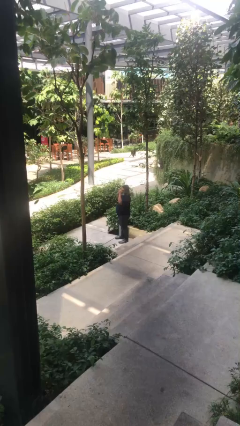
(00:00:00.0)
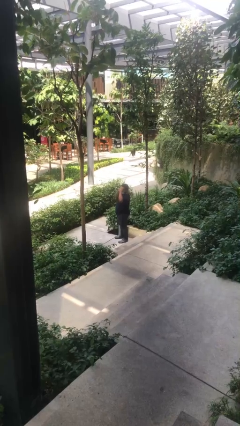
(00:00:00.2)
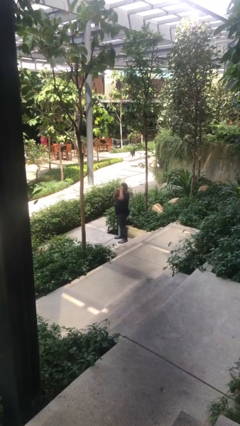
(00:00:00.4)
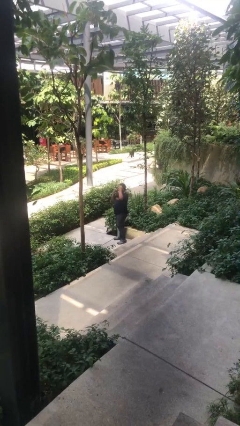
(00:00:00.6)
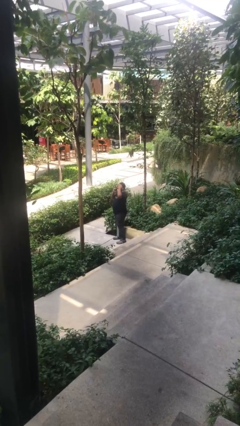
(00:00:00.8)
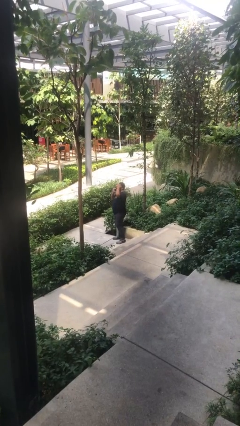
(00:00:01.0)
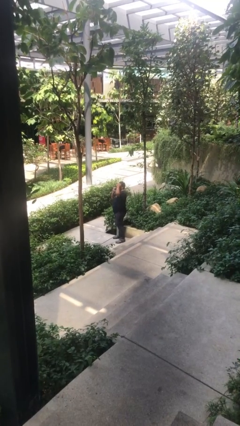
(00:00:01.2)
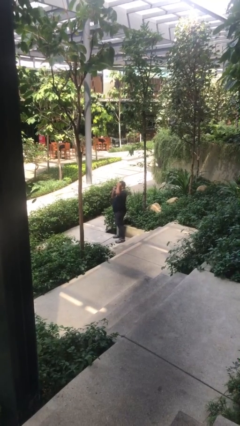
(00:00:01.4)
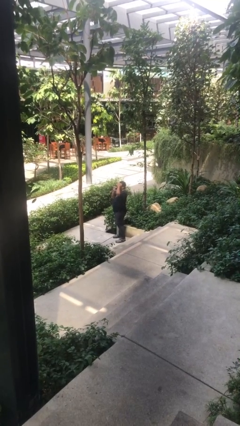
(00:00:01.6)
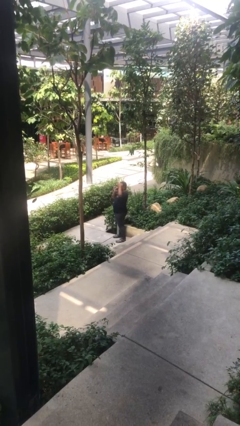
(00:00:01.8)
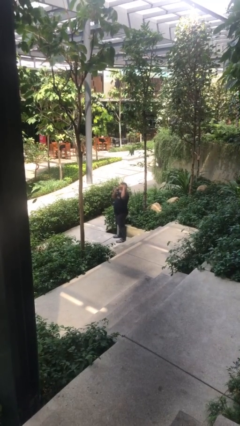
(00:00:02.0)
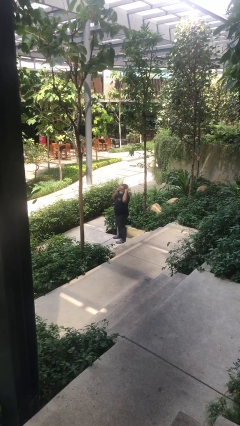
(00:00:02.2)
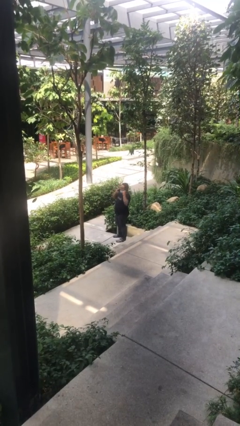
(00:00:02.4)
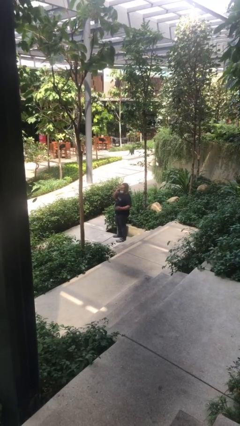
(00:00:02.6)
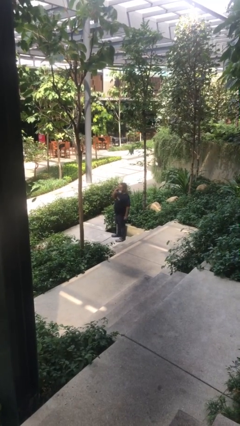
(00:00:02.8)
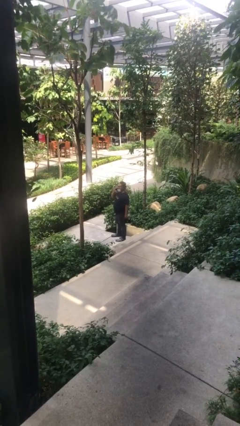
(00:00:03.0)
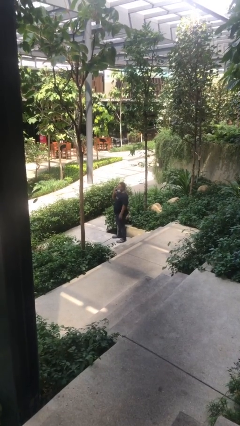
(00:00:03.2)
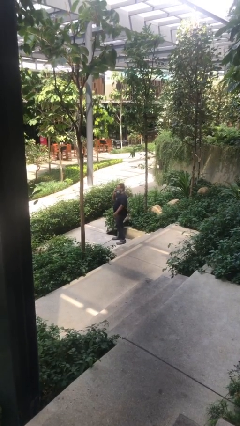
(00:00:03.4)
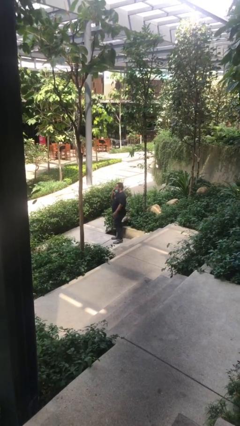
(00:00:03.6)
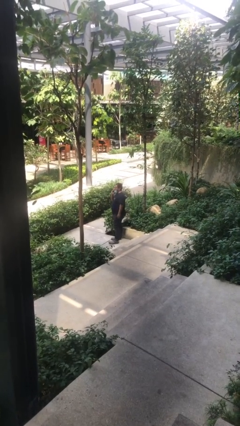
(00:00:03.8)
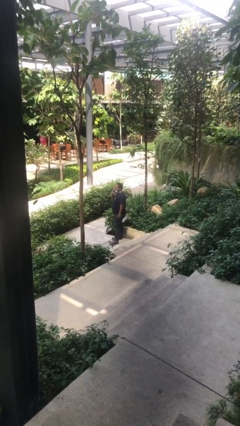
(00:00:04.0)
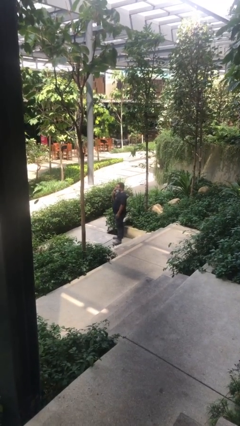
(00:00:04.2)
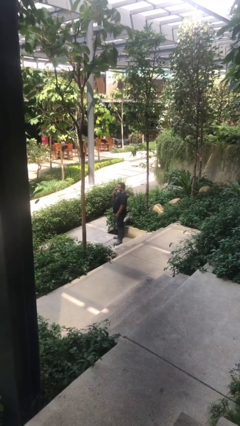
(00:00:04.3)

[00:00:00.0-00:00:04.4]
person talks on phone

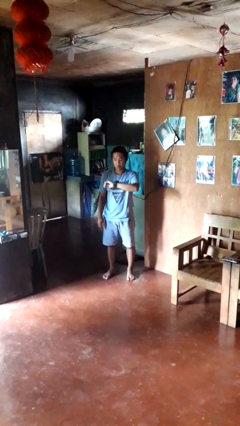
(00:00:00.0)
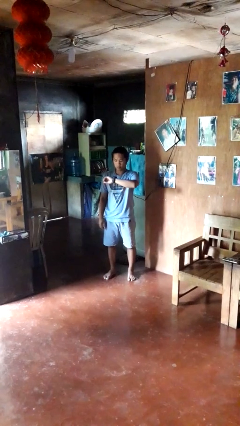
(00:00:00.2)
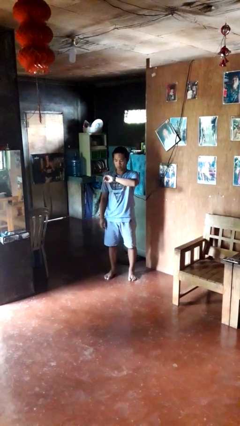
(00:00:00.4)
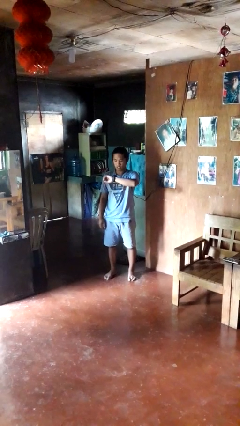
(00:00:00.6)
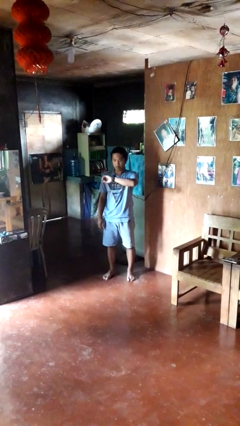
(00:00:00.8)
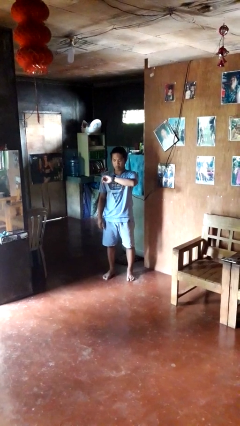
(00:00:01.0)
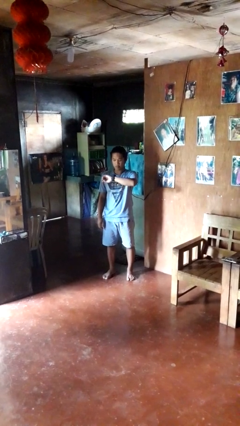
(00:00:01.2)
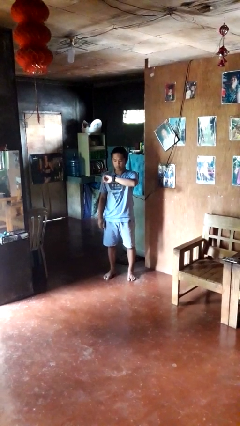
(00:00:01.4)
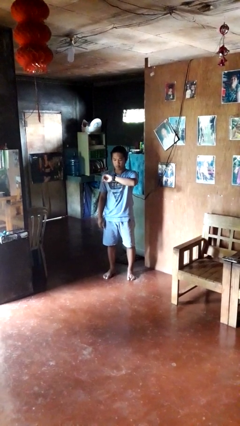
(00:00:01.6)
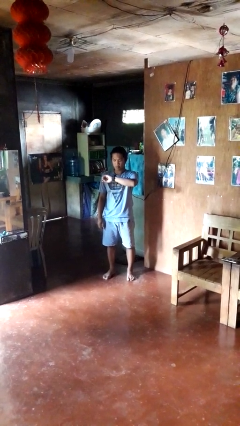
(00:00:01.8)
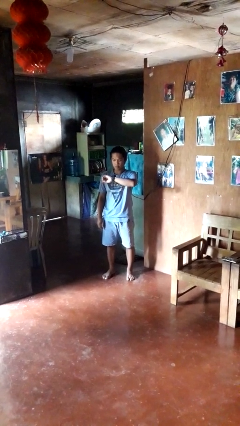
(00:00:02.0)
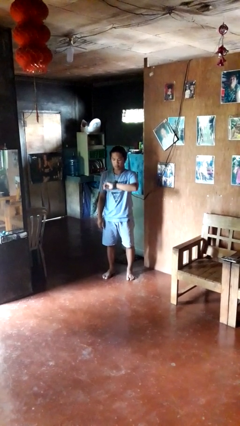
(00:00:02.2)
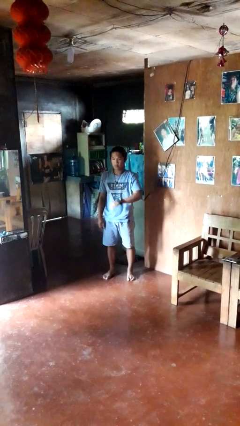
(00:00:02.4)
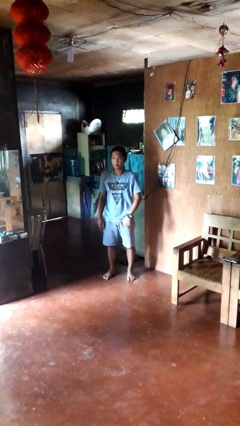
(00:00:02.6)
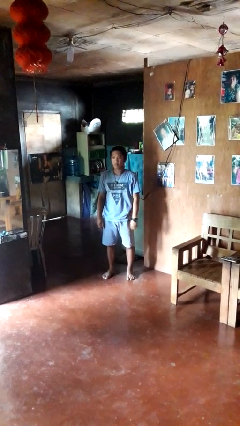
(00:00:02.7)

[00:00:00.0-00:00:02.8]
person looks at wristwatch

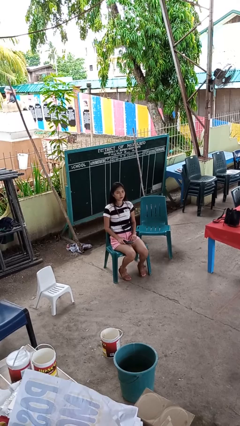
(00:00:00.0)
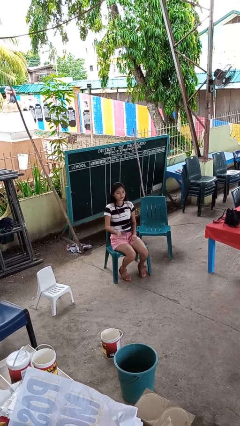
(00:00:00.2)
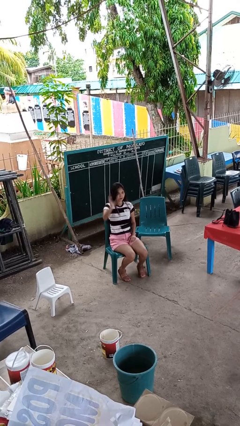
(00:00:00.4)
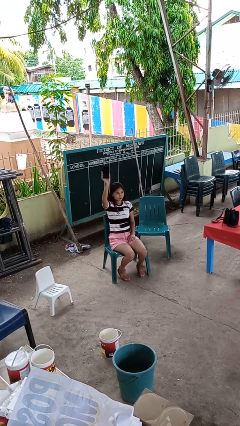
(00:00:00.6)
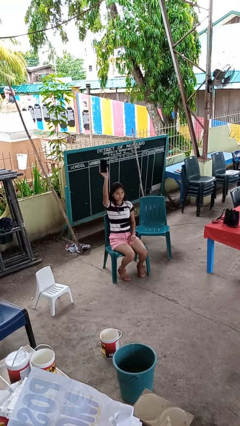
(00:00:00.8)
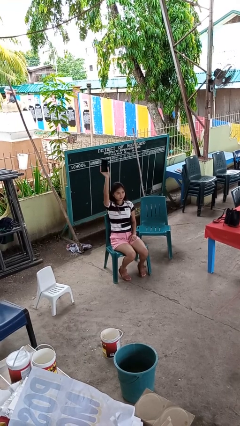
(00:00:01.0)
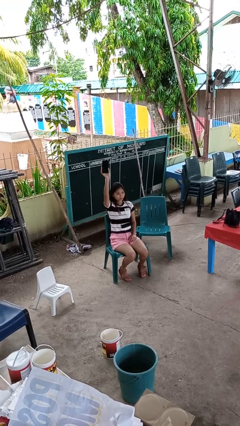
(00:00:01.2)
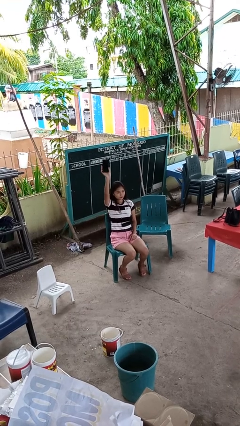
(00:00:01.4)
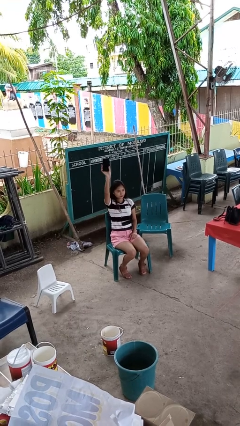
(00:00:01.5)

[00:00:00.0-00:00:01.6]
person holds object above head

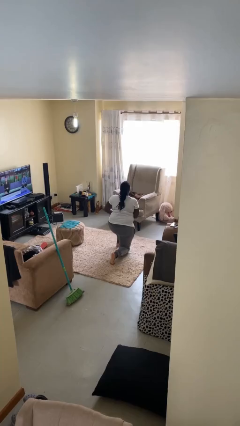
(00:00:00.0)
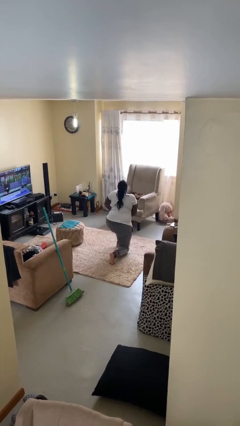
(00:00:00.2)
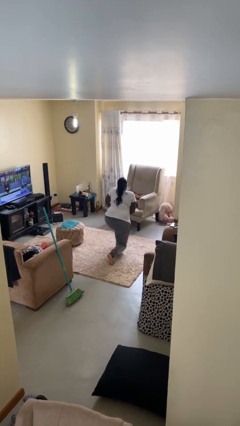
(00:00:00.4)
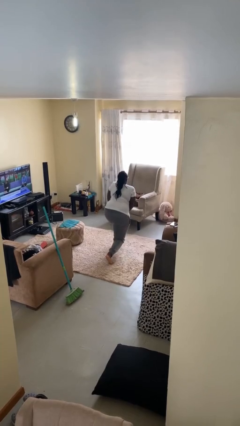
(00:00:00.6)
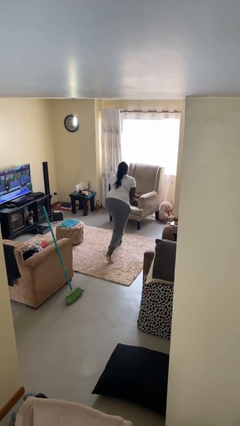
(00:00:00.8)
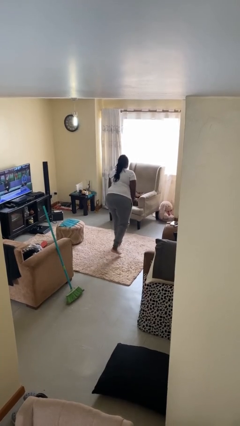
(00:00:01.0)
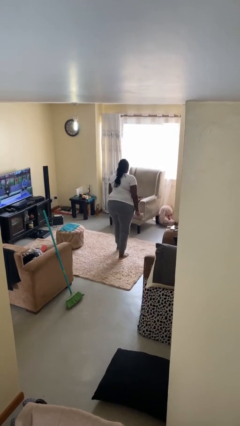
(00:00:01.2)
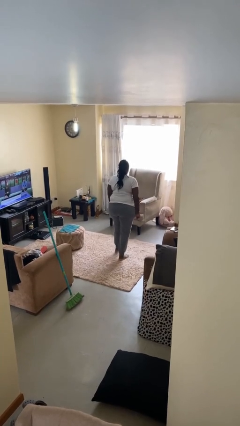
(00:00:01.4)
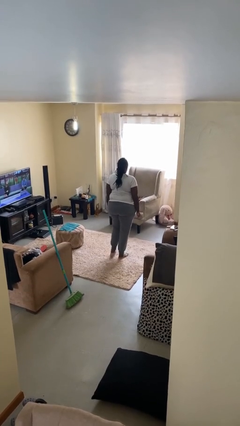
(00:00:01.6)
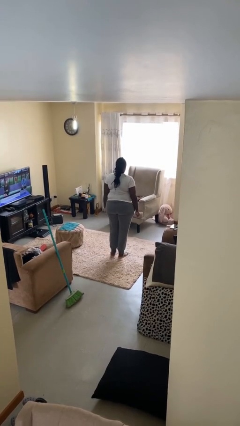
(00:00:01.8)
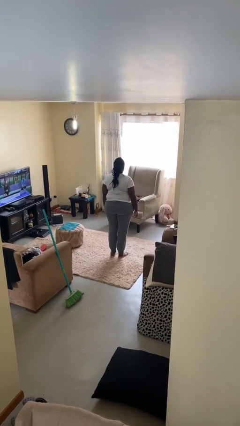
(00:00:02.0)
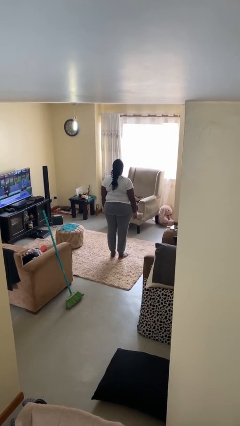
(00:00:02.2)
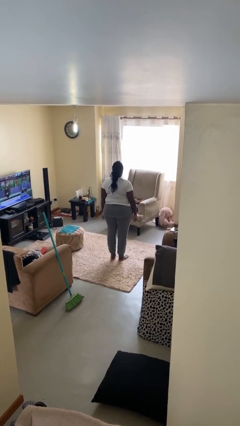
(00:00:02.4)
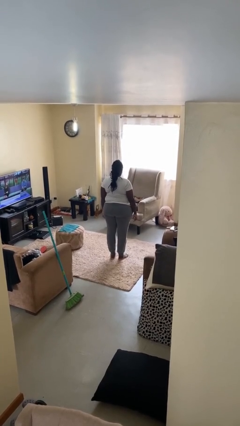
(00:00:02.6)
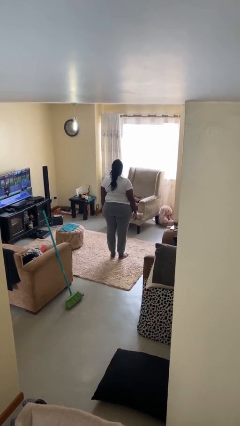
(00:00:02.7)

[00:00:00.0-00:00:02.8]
person stands up from floor

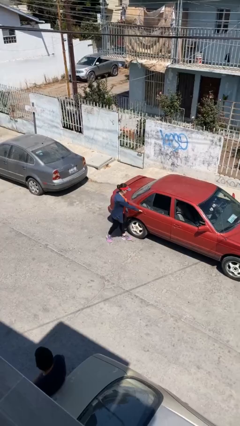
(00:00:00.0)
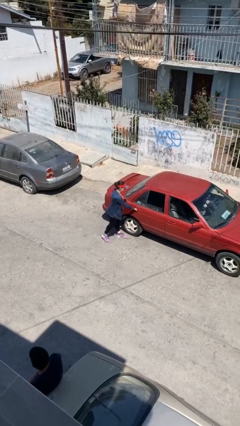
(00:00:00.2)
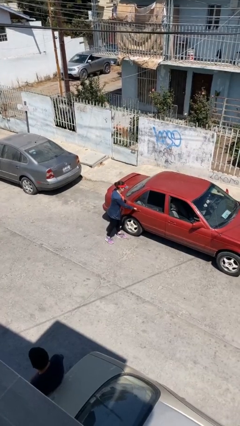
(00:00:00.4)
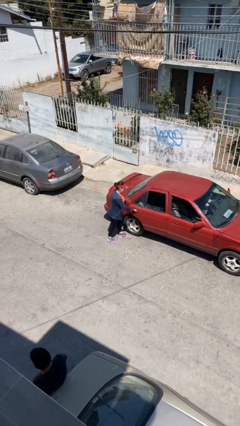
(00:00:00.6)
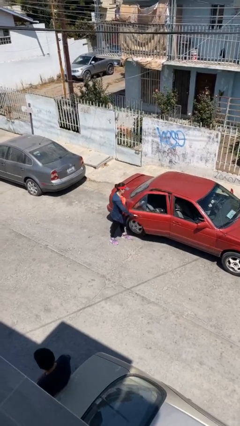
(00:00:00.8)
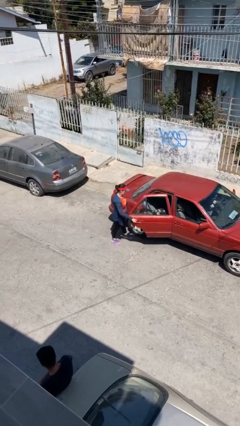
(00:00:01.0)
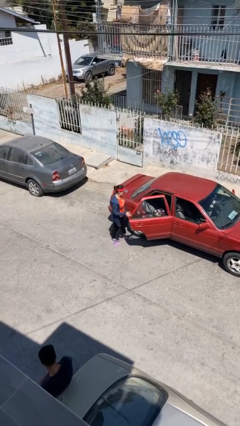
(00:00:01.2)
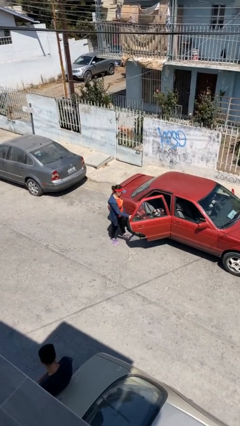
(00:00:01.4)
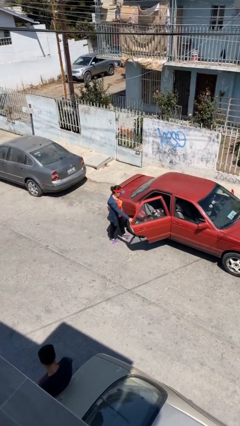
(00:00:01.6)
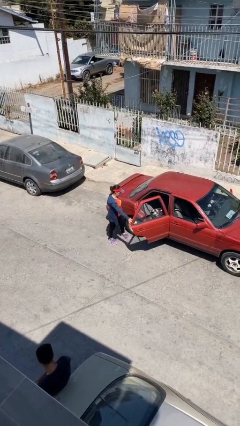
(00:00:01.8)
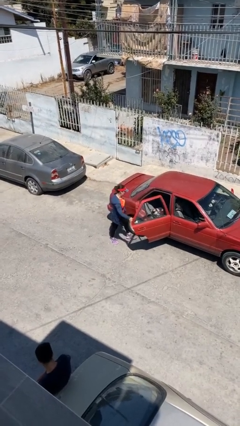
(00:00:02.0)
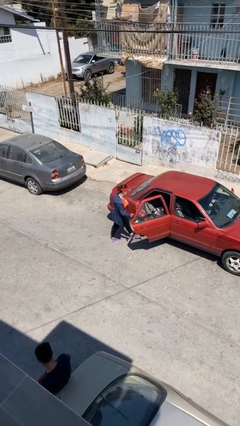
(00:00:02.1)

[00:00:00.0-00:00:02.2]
person opens car door

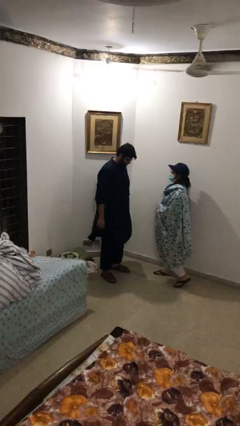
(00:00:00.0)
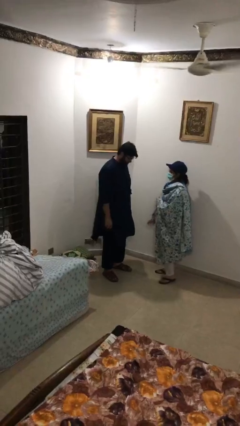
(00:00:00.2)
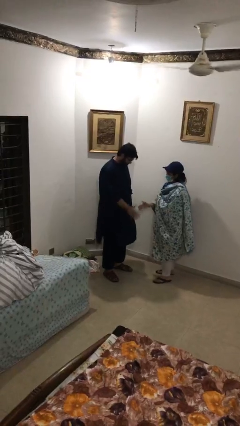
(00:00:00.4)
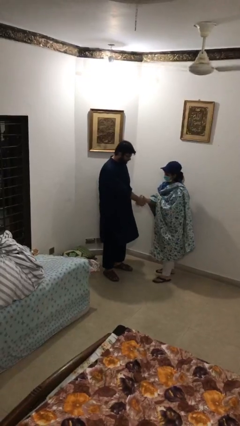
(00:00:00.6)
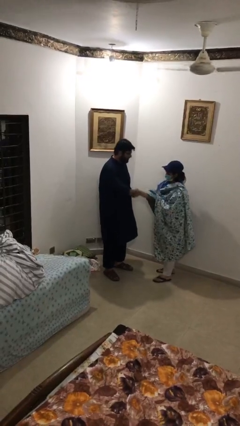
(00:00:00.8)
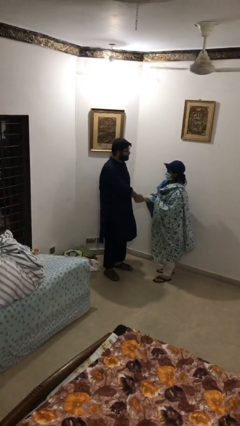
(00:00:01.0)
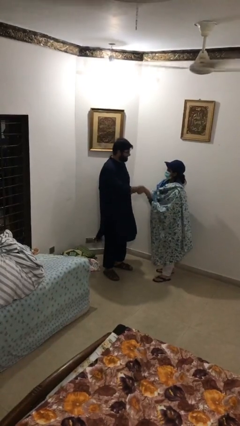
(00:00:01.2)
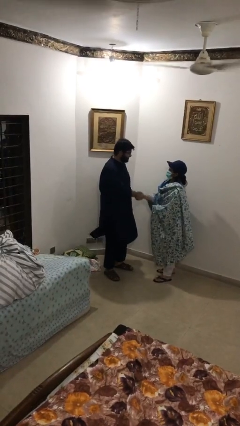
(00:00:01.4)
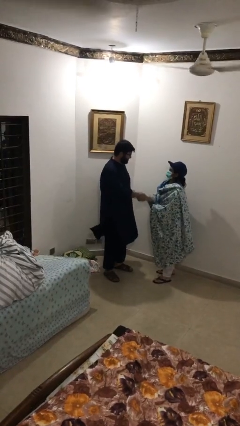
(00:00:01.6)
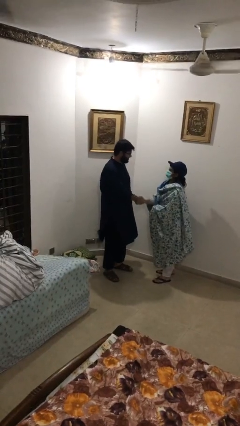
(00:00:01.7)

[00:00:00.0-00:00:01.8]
person shakes hand

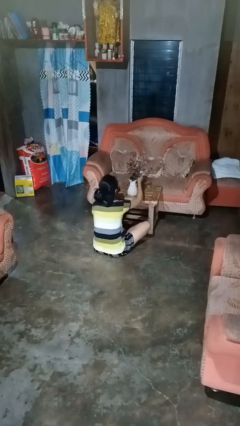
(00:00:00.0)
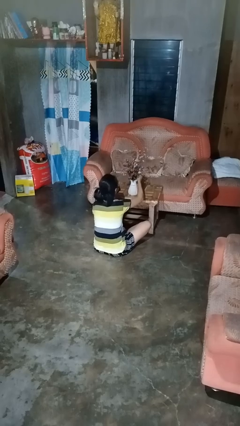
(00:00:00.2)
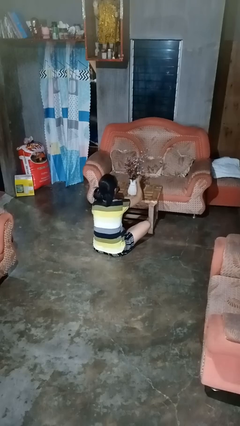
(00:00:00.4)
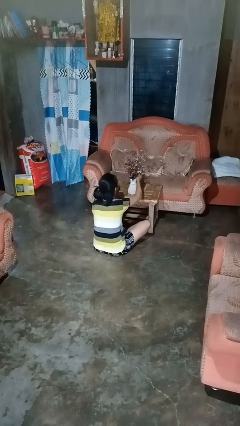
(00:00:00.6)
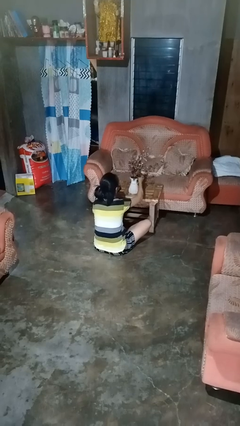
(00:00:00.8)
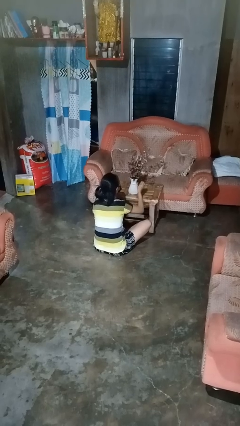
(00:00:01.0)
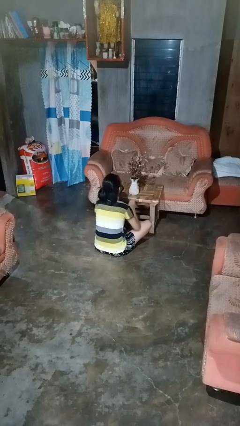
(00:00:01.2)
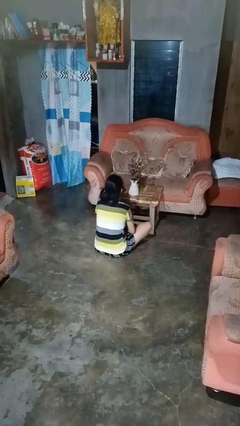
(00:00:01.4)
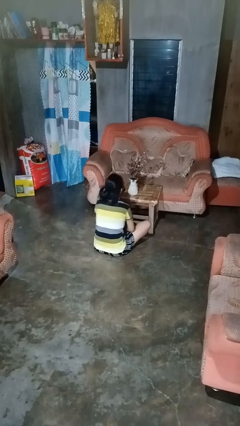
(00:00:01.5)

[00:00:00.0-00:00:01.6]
person arranges flowers in vase
